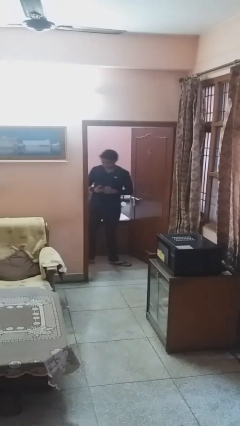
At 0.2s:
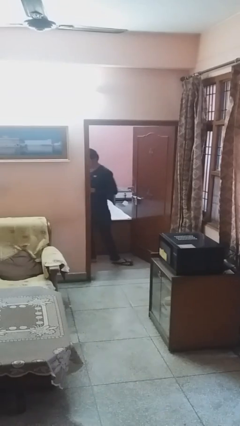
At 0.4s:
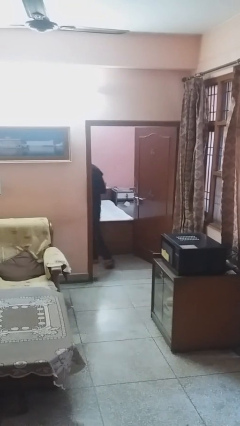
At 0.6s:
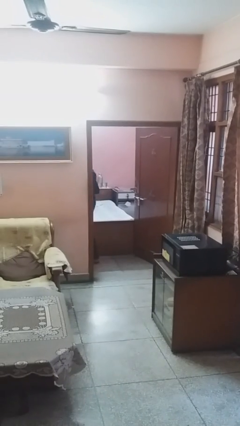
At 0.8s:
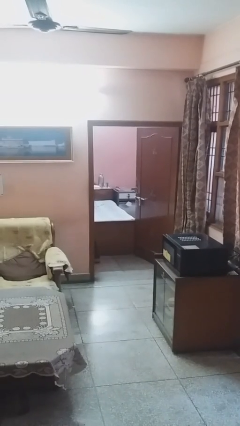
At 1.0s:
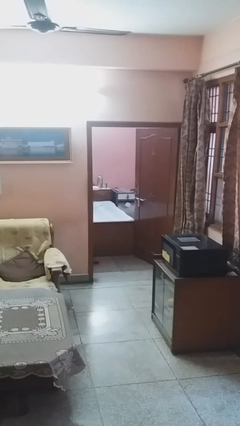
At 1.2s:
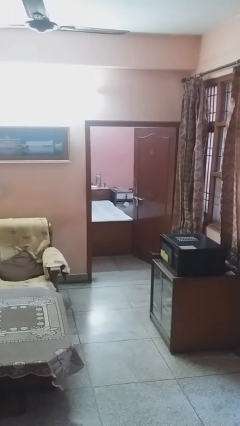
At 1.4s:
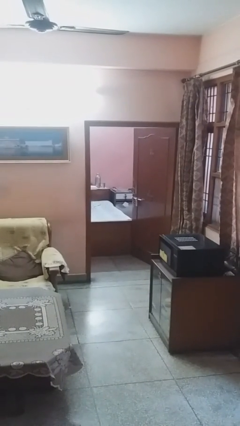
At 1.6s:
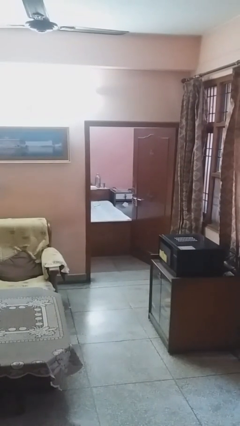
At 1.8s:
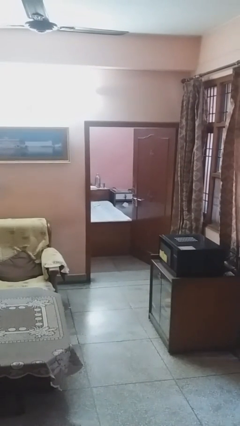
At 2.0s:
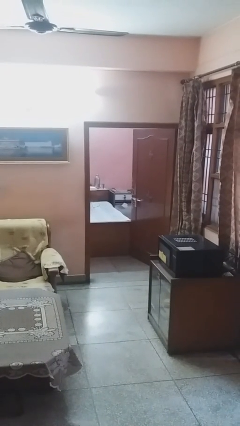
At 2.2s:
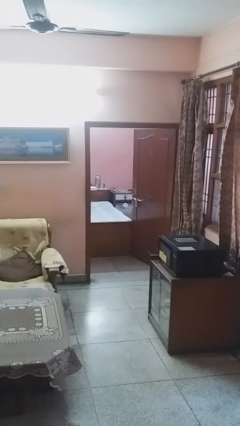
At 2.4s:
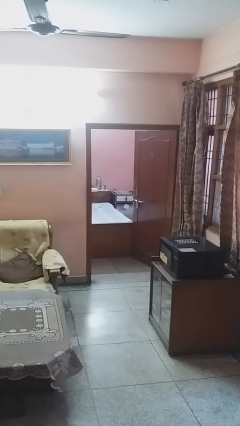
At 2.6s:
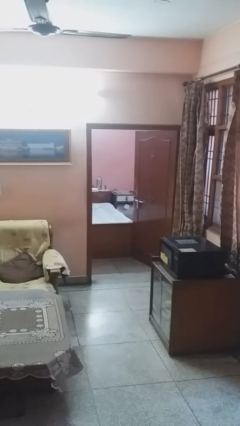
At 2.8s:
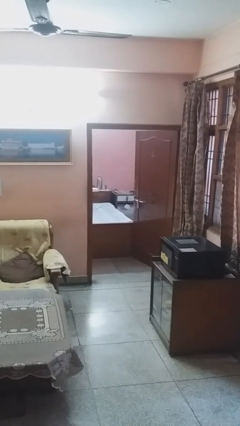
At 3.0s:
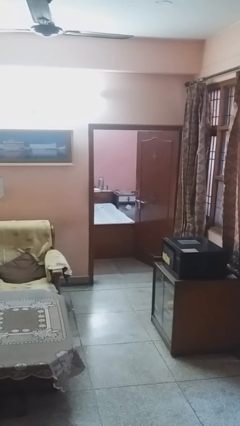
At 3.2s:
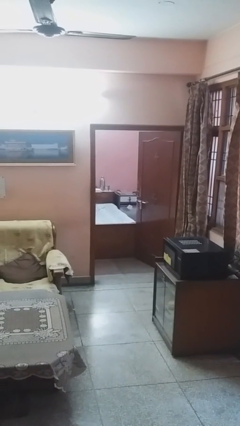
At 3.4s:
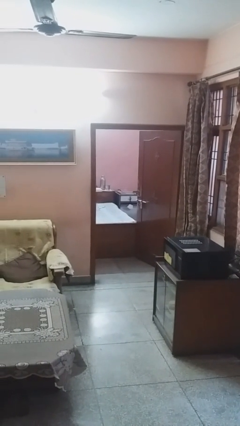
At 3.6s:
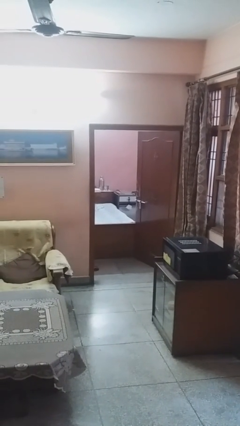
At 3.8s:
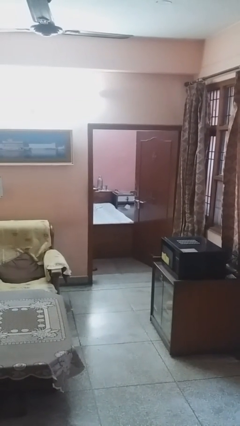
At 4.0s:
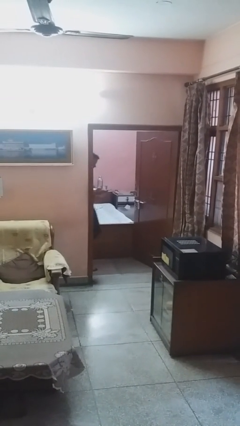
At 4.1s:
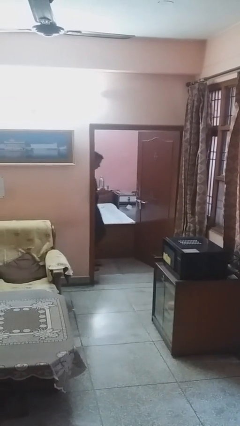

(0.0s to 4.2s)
person exits scene through structure

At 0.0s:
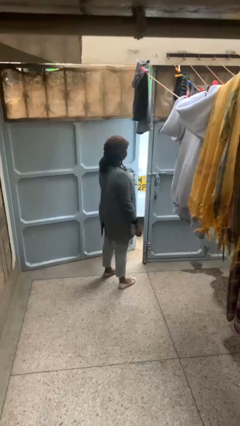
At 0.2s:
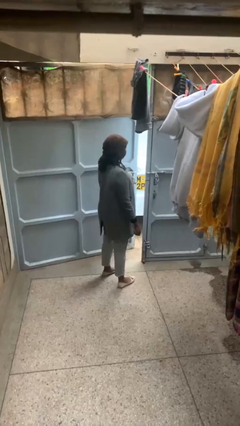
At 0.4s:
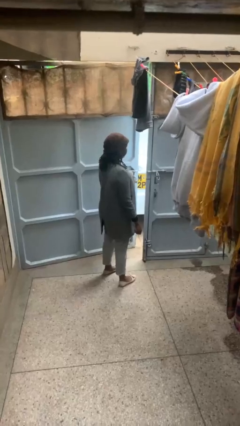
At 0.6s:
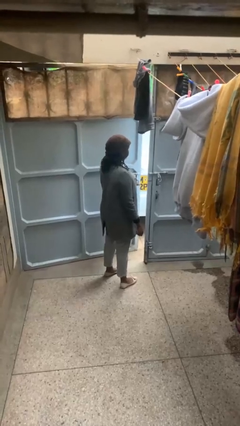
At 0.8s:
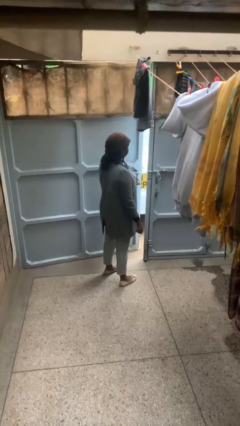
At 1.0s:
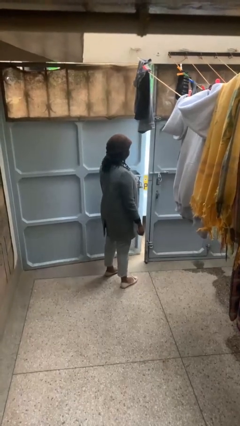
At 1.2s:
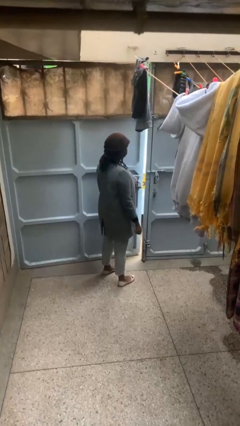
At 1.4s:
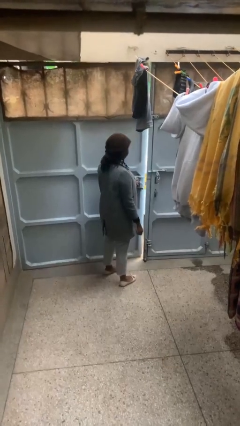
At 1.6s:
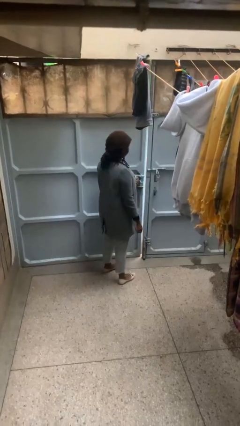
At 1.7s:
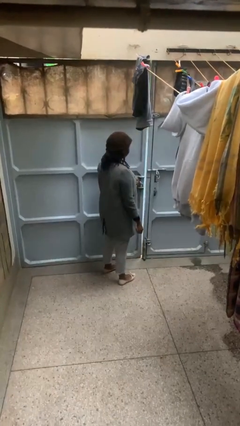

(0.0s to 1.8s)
person closes gate

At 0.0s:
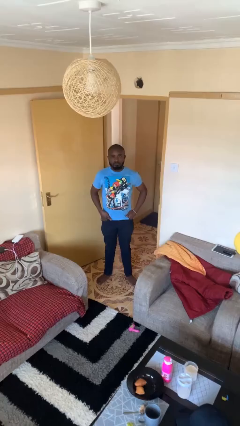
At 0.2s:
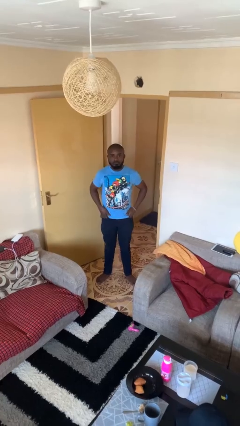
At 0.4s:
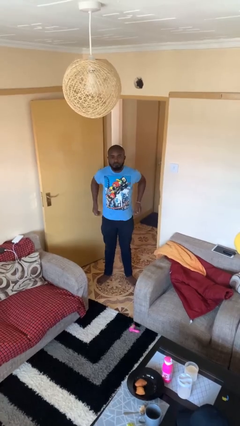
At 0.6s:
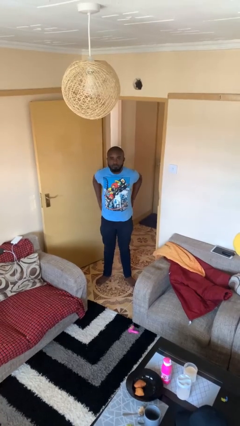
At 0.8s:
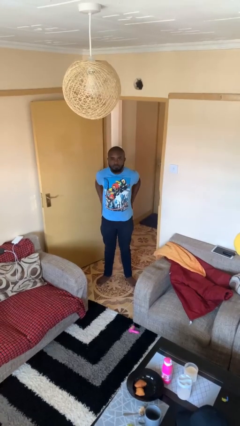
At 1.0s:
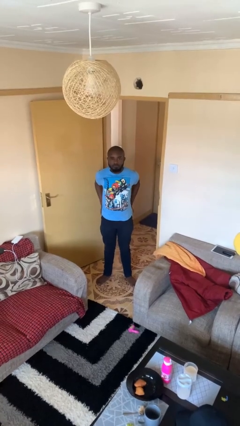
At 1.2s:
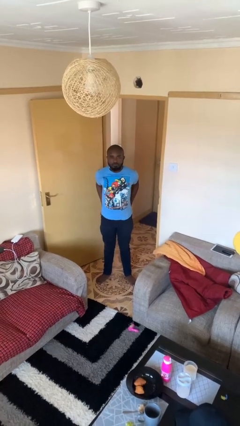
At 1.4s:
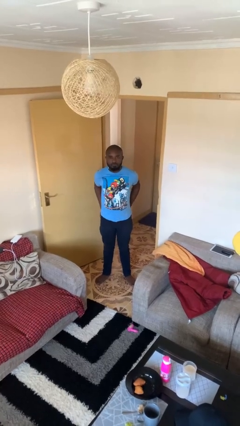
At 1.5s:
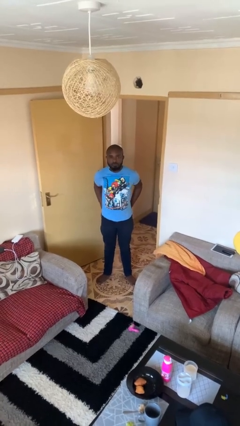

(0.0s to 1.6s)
person puts hands in back pockets

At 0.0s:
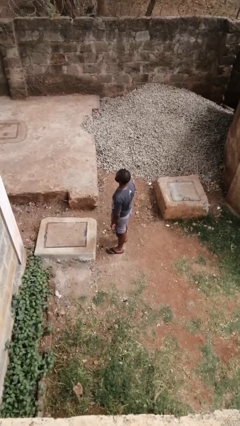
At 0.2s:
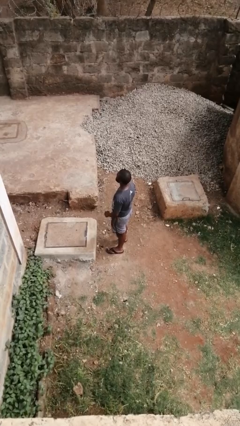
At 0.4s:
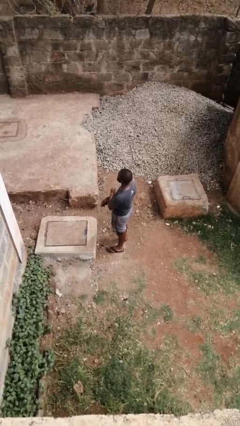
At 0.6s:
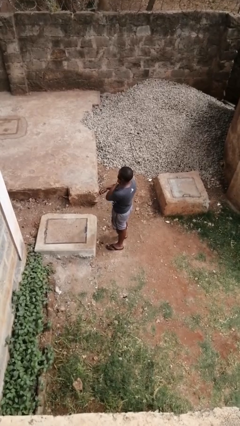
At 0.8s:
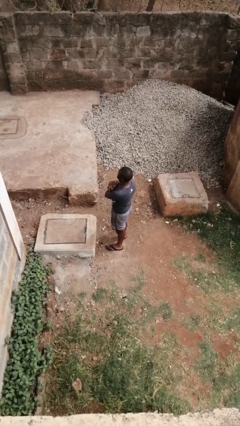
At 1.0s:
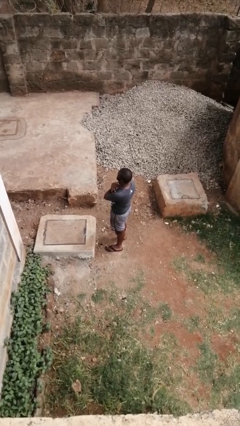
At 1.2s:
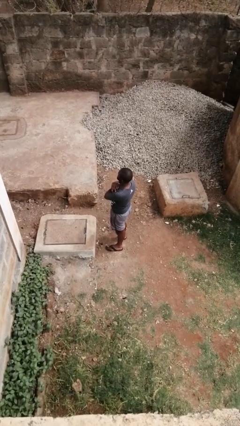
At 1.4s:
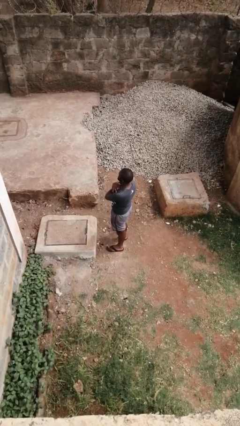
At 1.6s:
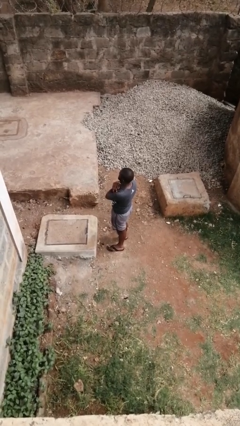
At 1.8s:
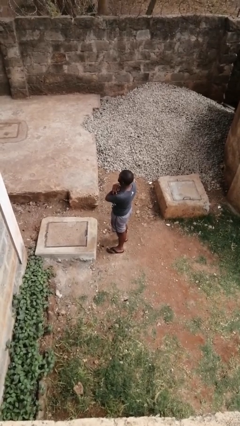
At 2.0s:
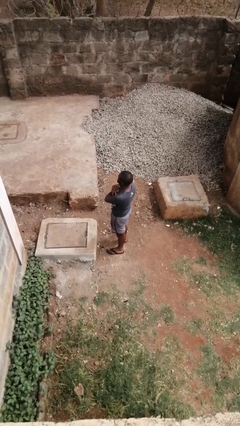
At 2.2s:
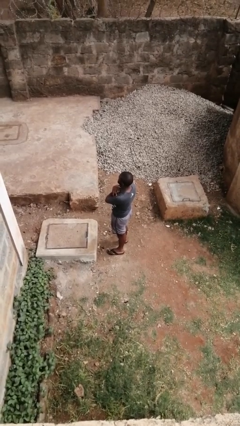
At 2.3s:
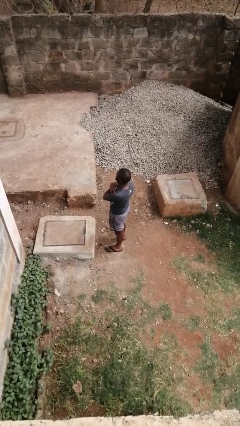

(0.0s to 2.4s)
person gestures arms x

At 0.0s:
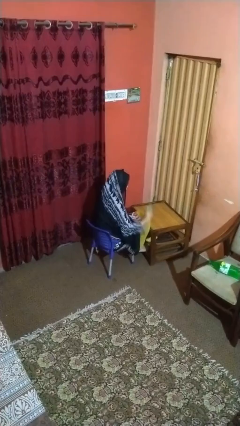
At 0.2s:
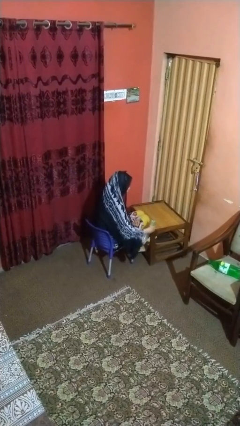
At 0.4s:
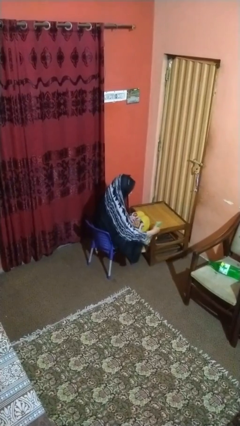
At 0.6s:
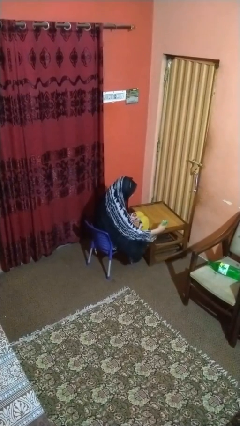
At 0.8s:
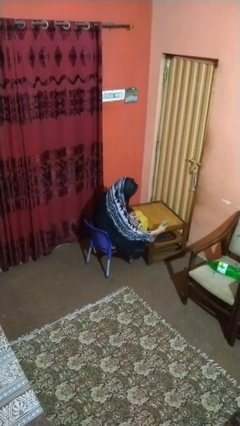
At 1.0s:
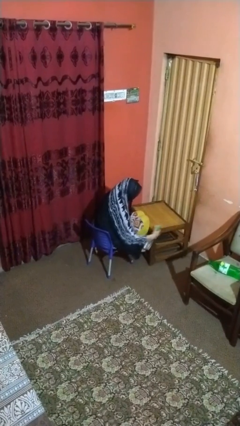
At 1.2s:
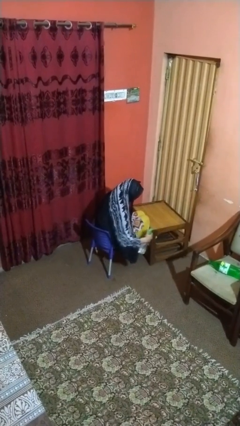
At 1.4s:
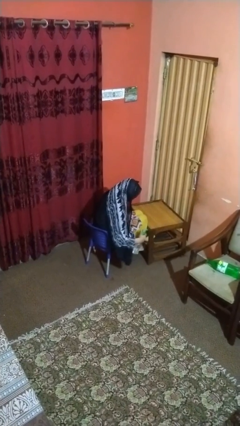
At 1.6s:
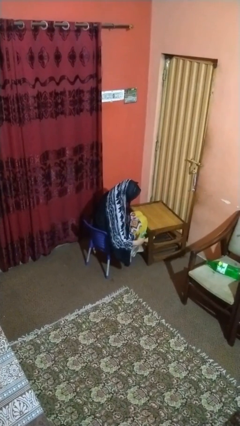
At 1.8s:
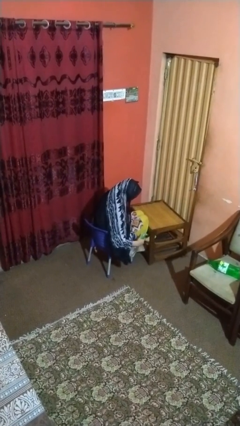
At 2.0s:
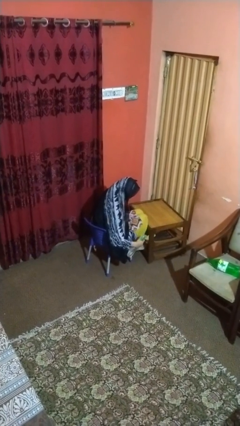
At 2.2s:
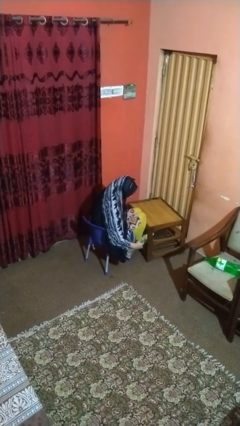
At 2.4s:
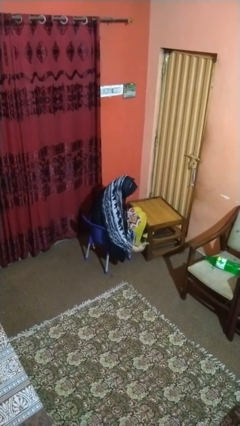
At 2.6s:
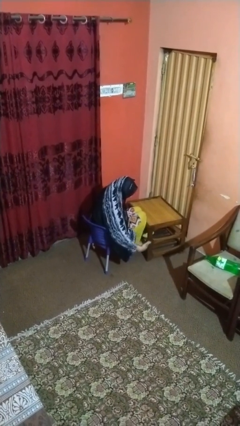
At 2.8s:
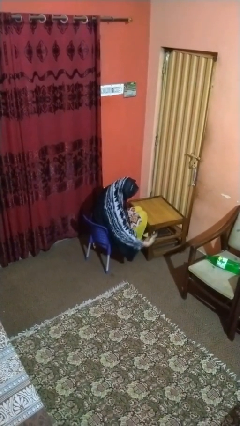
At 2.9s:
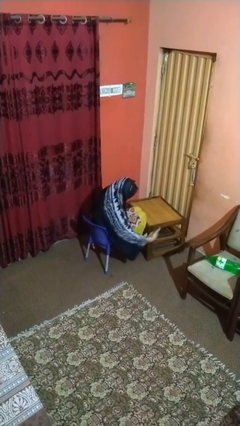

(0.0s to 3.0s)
person sprays from bottle

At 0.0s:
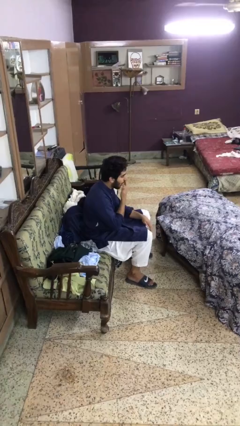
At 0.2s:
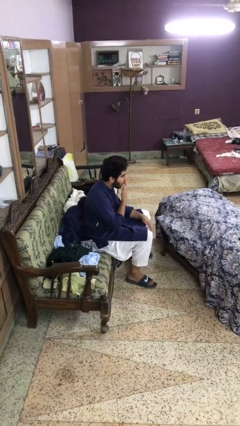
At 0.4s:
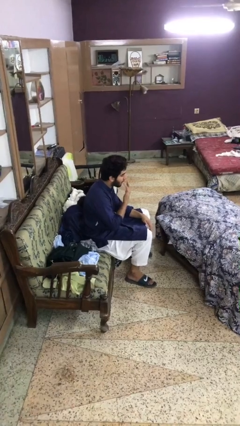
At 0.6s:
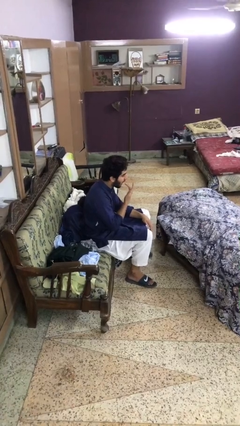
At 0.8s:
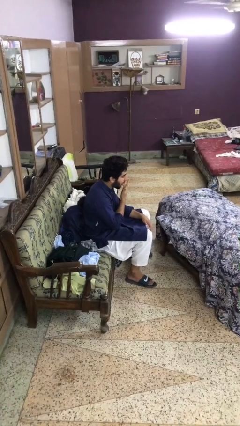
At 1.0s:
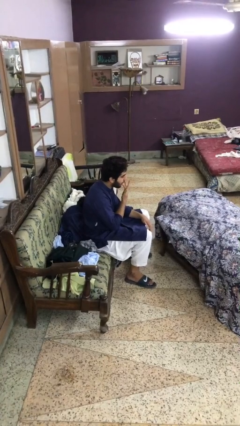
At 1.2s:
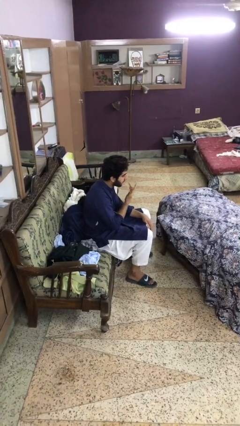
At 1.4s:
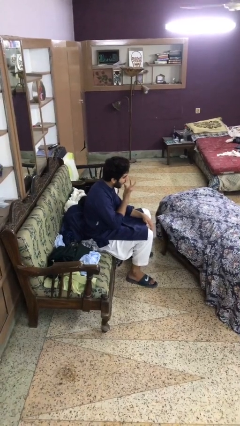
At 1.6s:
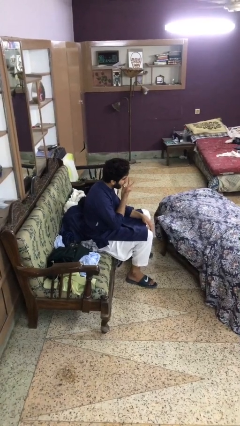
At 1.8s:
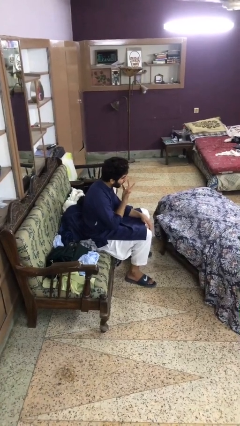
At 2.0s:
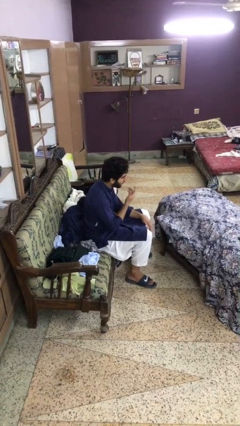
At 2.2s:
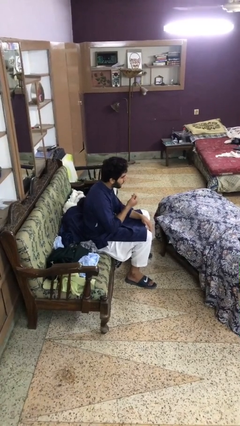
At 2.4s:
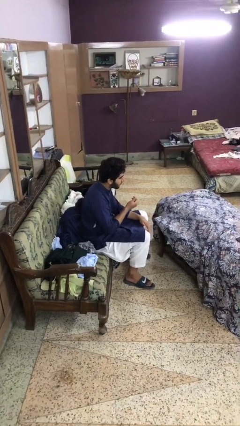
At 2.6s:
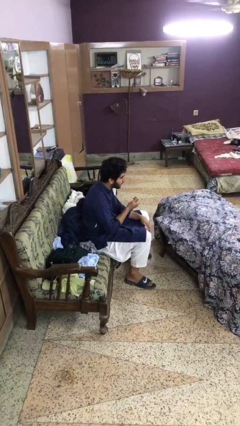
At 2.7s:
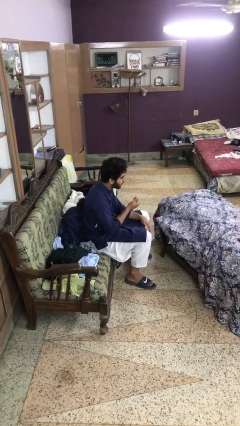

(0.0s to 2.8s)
person licks fingers

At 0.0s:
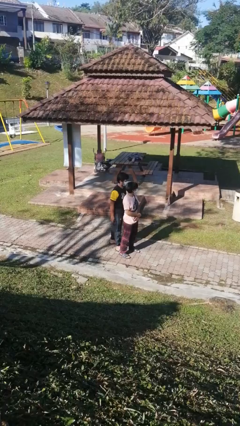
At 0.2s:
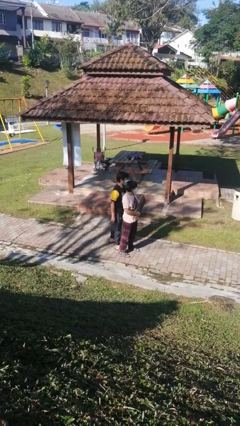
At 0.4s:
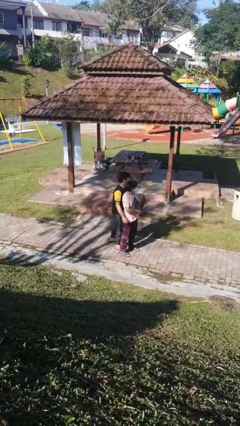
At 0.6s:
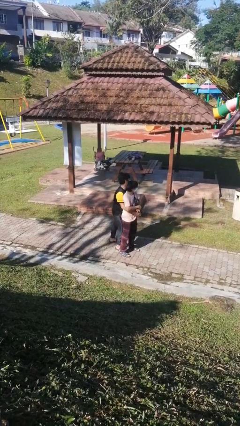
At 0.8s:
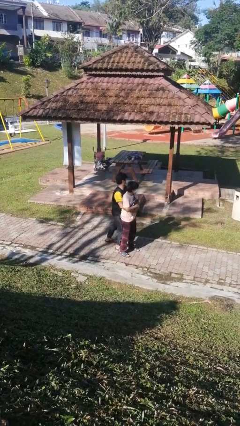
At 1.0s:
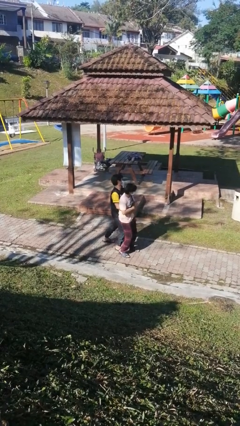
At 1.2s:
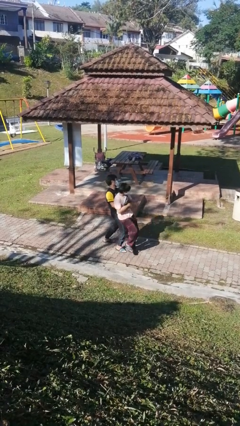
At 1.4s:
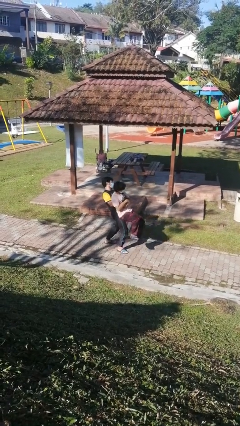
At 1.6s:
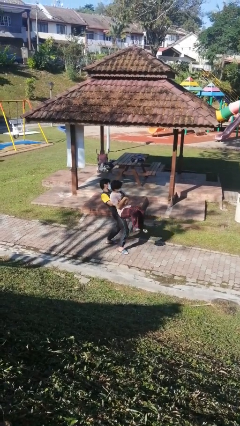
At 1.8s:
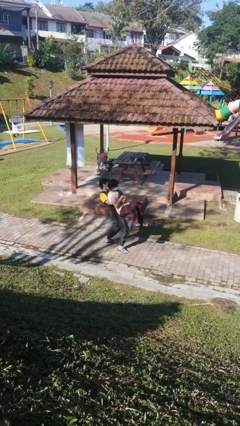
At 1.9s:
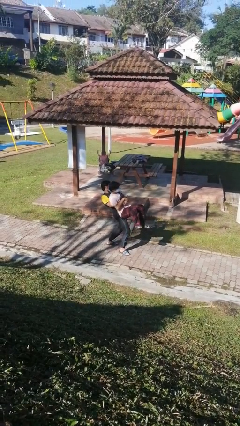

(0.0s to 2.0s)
person picks up person
